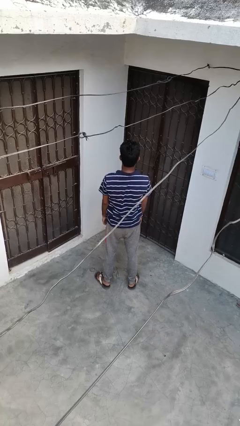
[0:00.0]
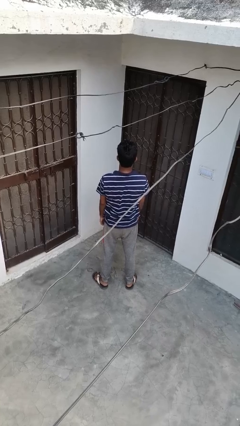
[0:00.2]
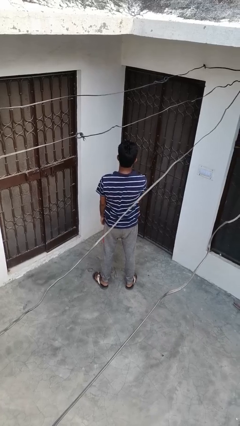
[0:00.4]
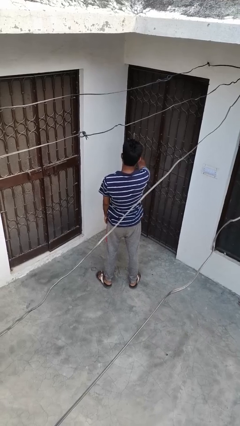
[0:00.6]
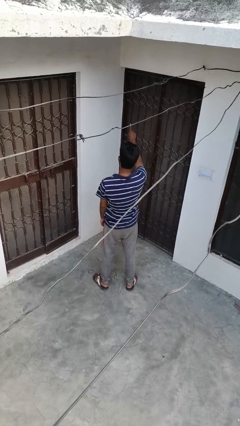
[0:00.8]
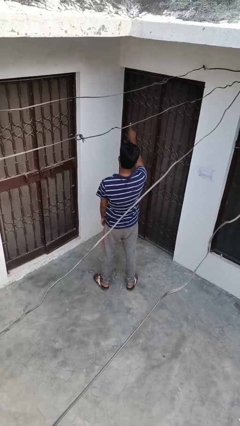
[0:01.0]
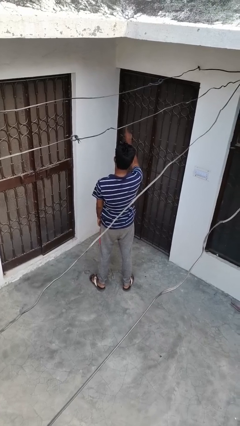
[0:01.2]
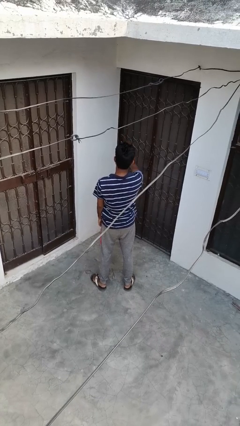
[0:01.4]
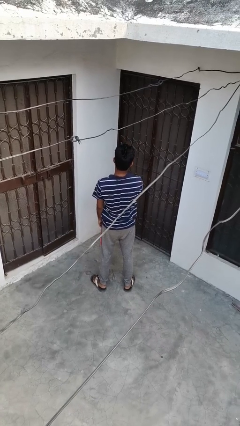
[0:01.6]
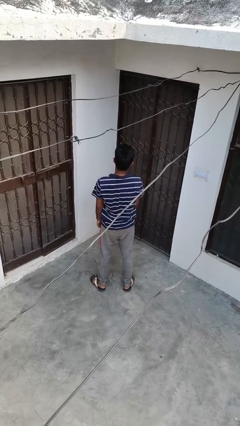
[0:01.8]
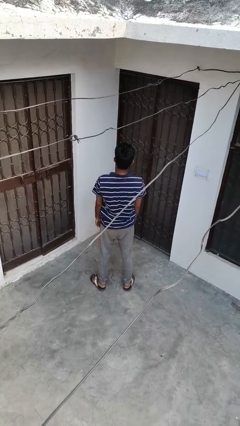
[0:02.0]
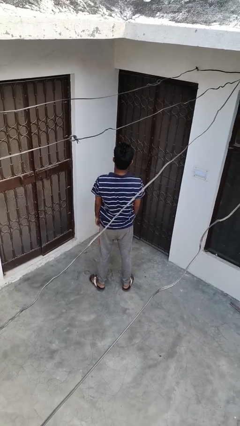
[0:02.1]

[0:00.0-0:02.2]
person gestures number one

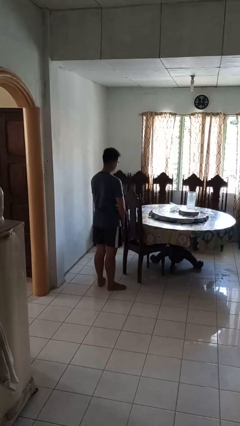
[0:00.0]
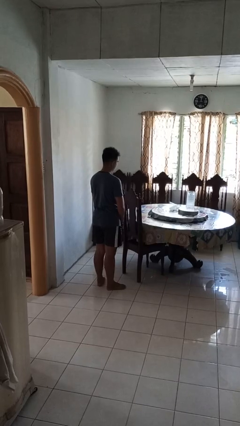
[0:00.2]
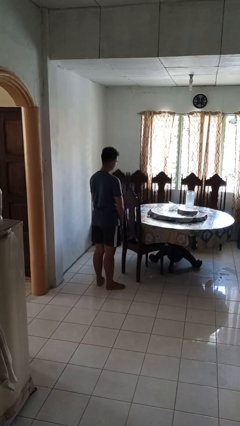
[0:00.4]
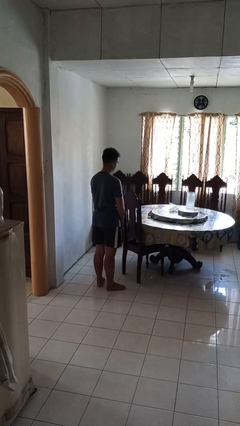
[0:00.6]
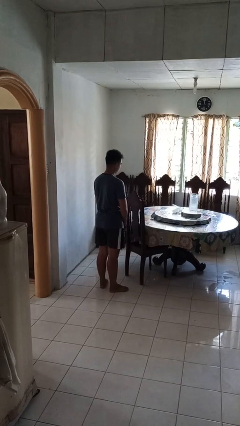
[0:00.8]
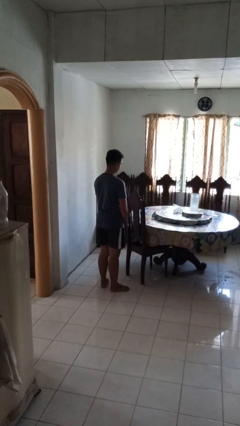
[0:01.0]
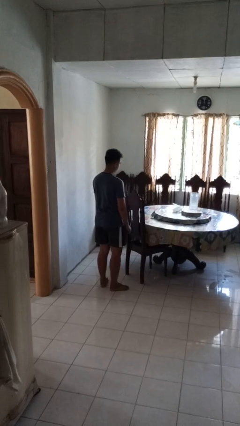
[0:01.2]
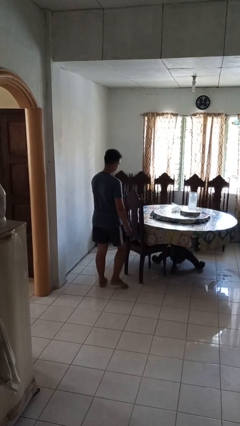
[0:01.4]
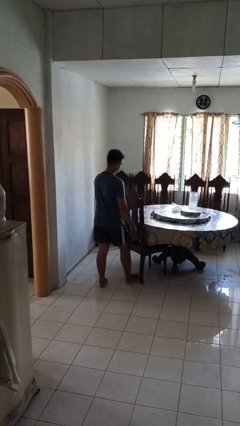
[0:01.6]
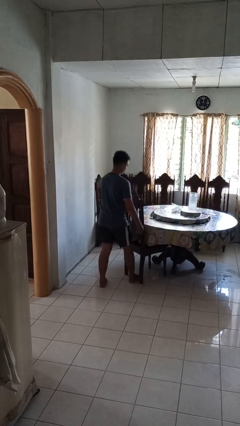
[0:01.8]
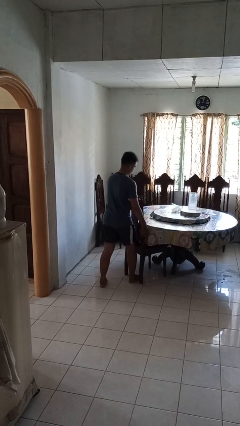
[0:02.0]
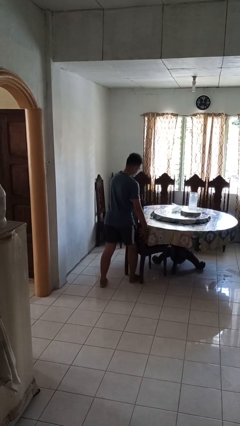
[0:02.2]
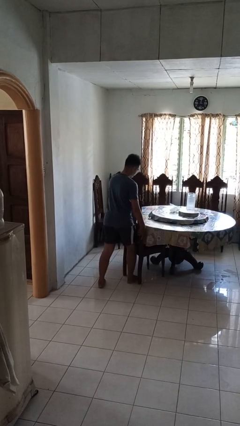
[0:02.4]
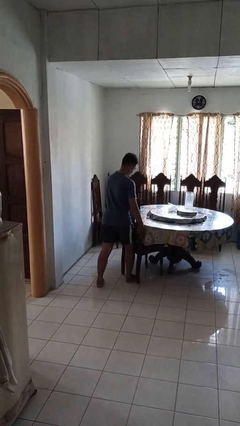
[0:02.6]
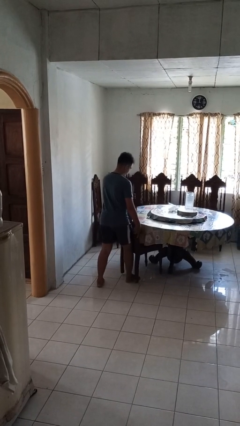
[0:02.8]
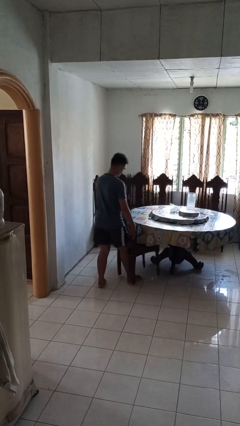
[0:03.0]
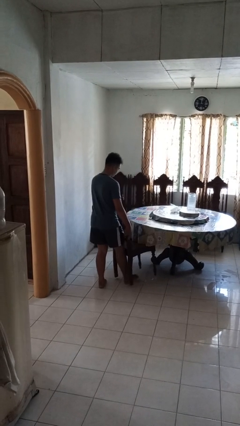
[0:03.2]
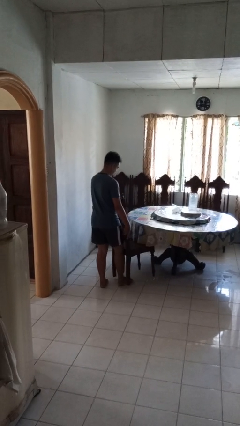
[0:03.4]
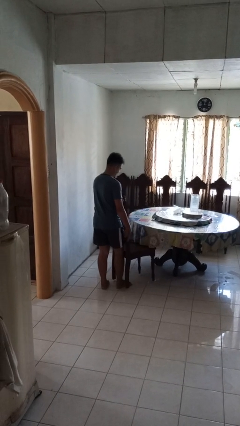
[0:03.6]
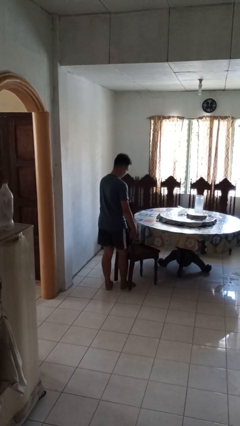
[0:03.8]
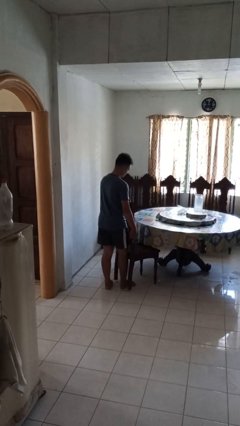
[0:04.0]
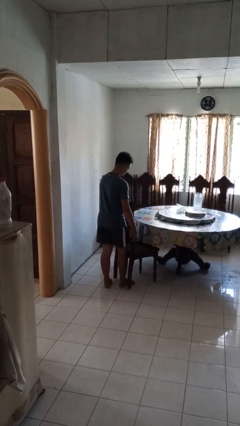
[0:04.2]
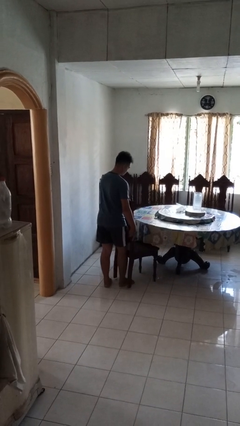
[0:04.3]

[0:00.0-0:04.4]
person pulls out chair

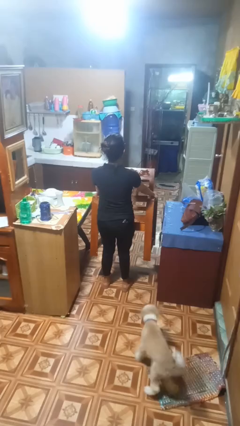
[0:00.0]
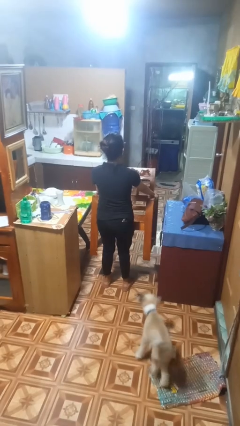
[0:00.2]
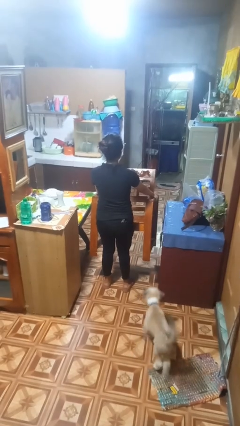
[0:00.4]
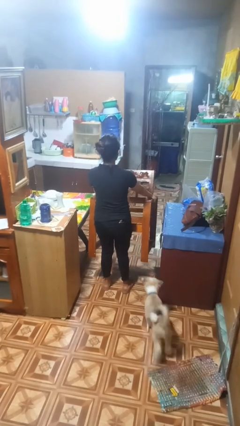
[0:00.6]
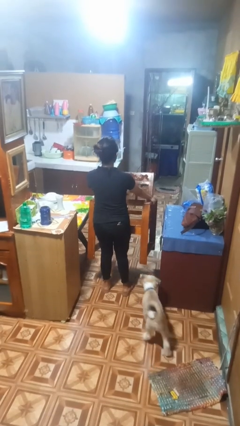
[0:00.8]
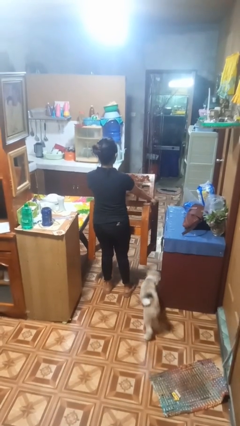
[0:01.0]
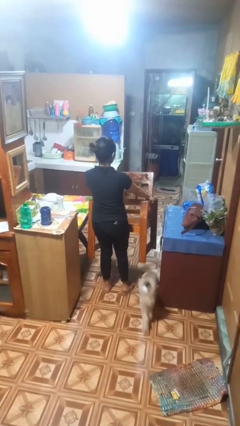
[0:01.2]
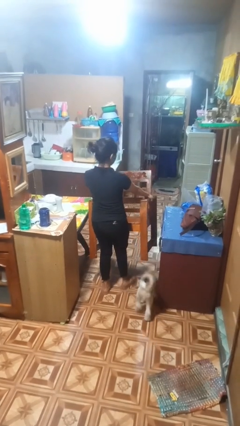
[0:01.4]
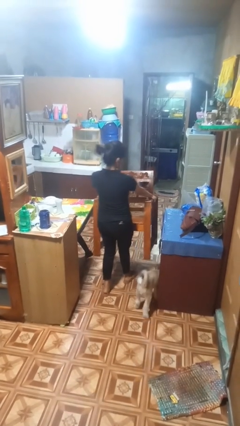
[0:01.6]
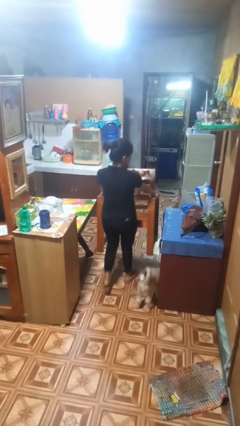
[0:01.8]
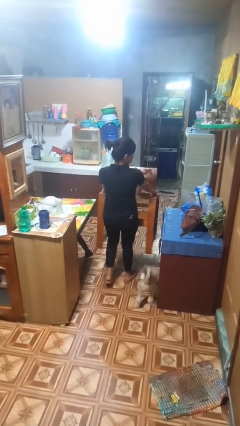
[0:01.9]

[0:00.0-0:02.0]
person carries furniture

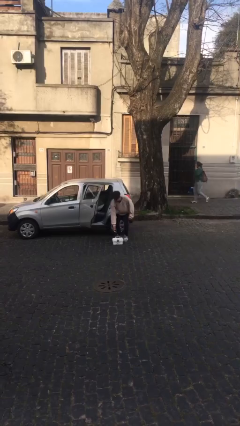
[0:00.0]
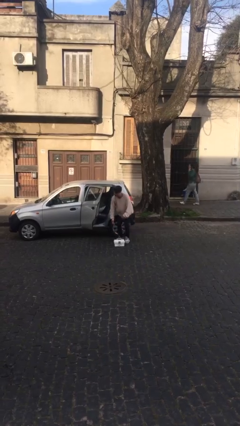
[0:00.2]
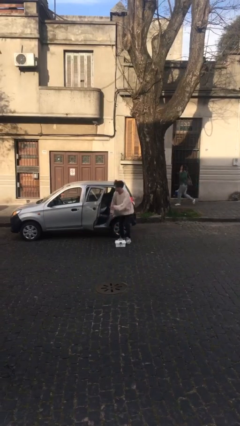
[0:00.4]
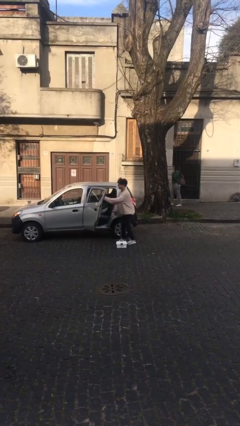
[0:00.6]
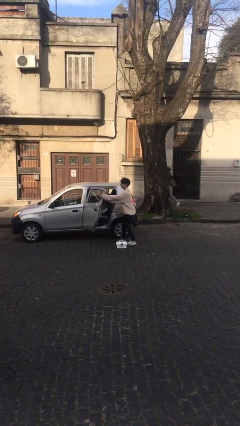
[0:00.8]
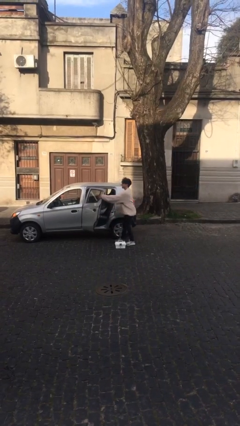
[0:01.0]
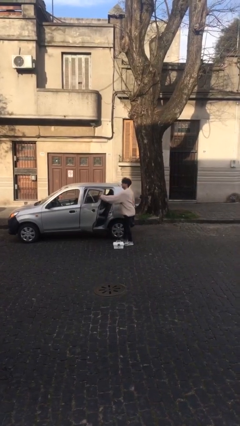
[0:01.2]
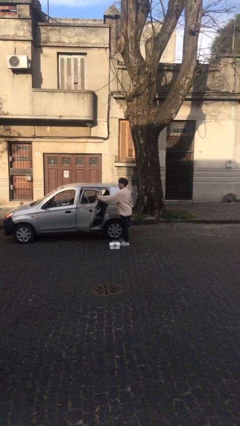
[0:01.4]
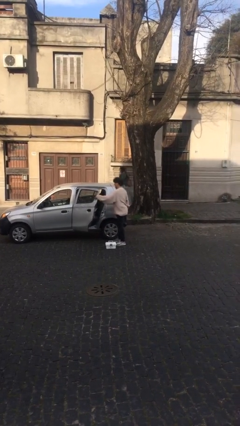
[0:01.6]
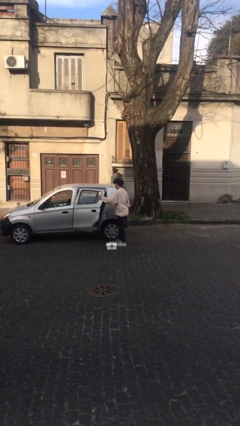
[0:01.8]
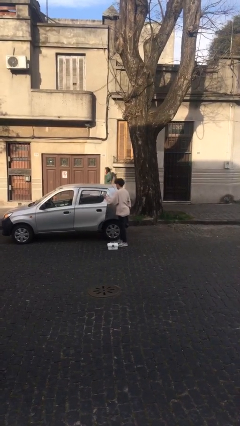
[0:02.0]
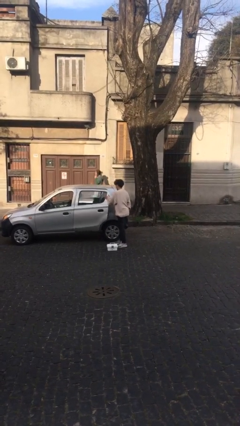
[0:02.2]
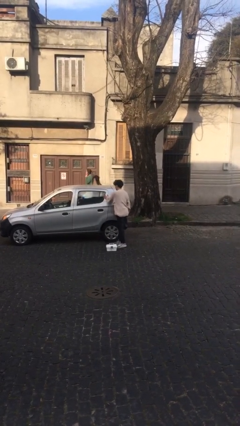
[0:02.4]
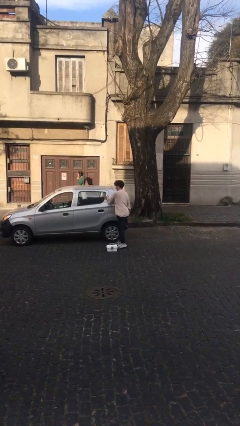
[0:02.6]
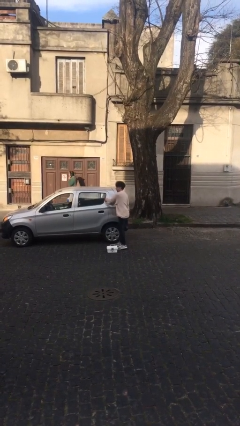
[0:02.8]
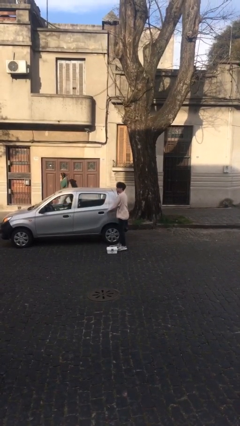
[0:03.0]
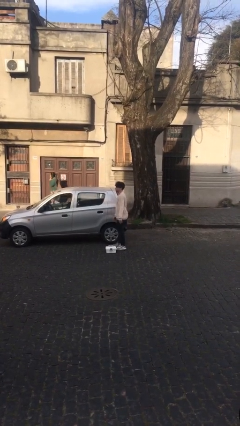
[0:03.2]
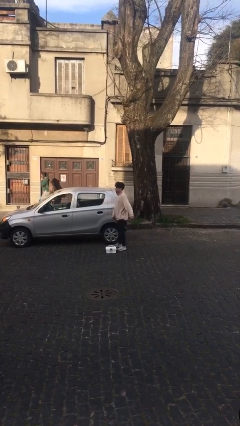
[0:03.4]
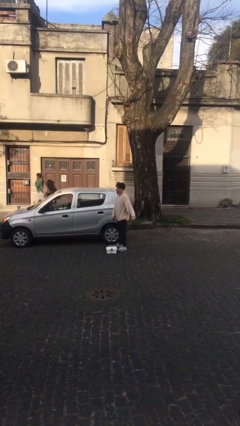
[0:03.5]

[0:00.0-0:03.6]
person closes car door

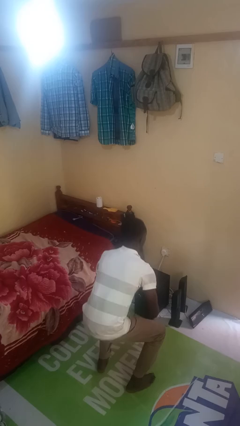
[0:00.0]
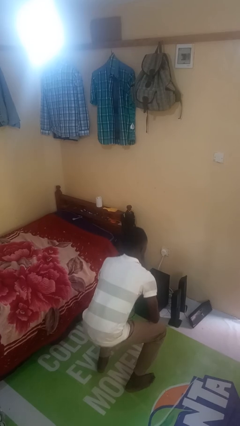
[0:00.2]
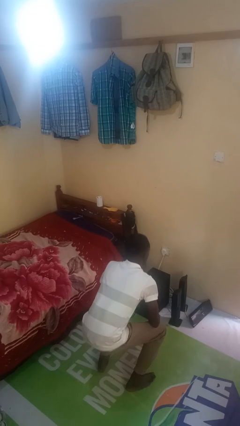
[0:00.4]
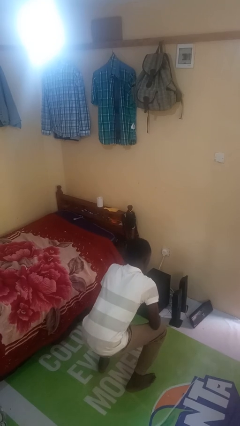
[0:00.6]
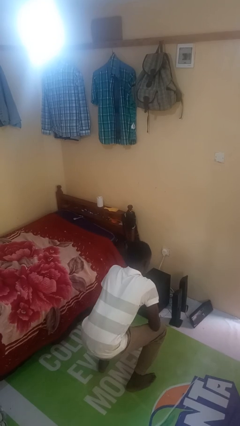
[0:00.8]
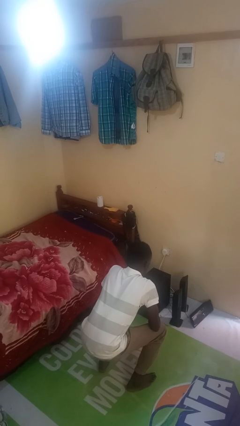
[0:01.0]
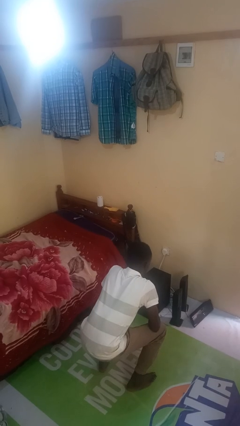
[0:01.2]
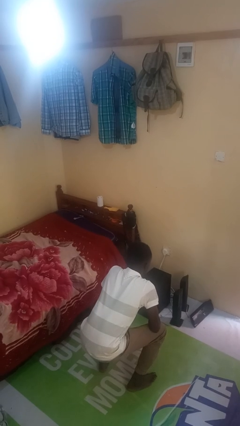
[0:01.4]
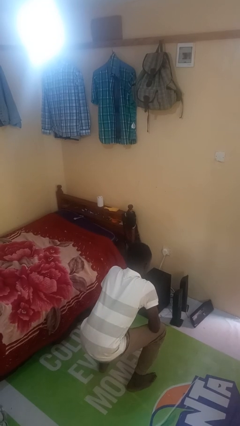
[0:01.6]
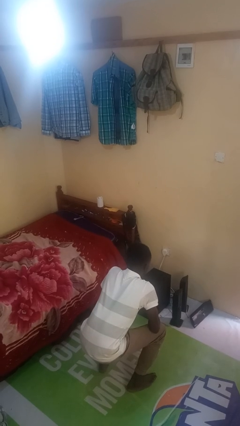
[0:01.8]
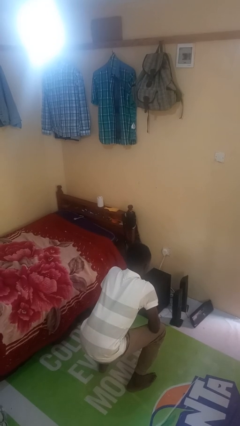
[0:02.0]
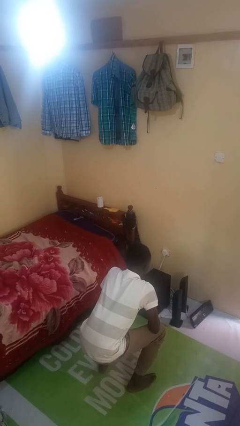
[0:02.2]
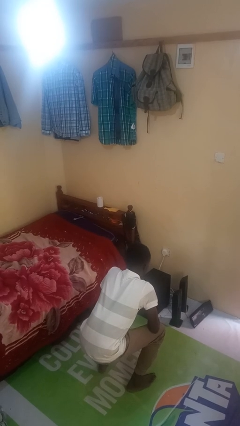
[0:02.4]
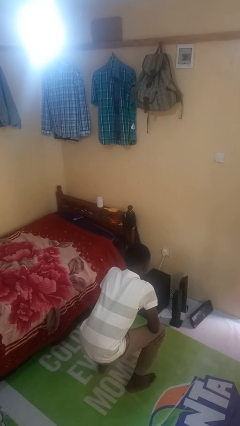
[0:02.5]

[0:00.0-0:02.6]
person squats

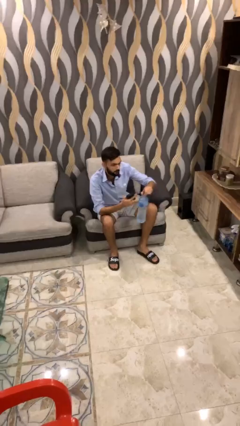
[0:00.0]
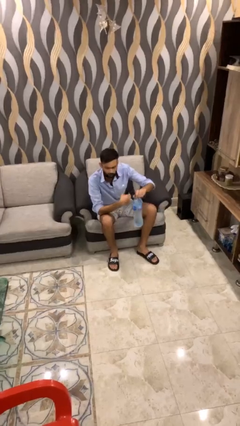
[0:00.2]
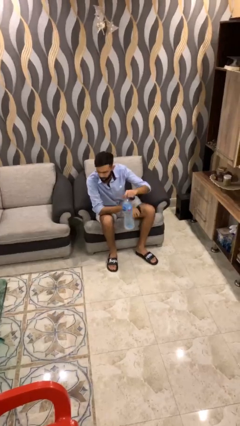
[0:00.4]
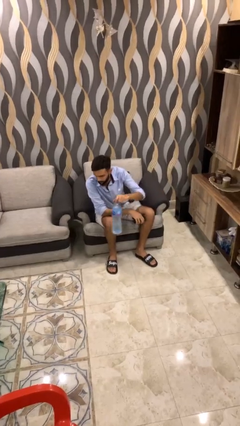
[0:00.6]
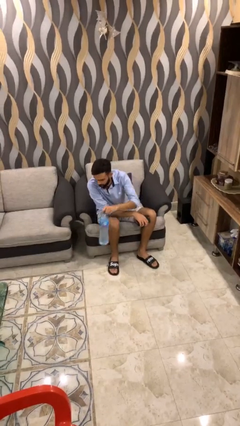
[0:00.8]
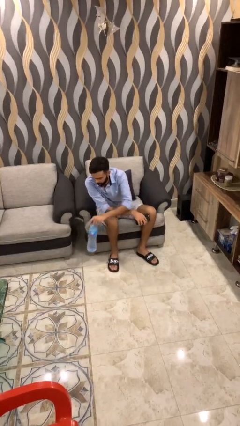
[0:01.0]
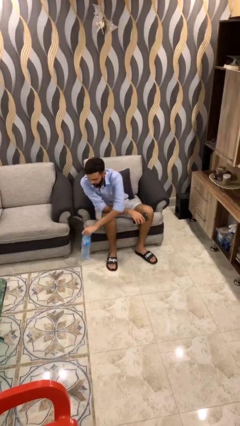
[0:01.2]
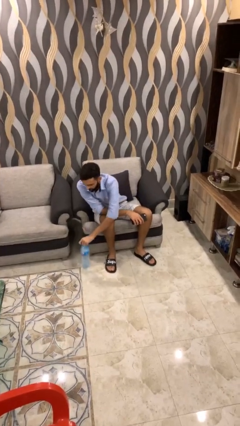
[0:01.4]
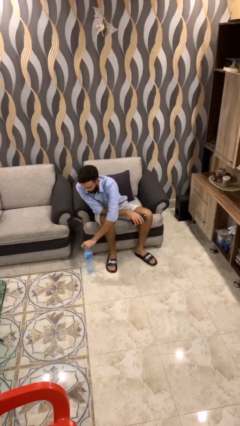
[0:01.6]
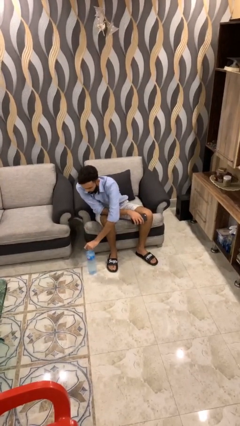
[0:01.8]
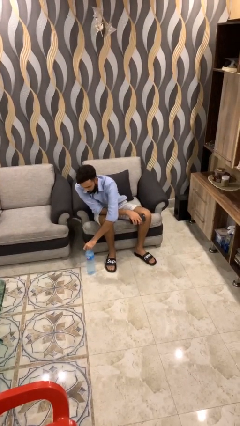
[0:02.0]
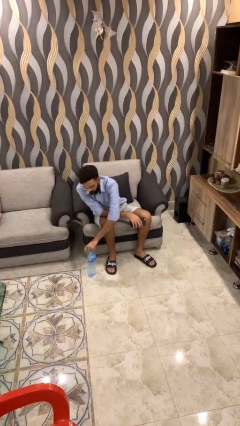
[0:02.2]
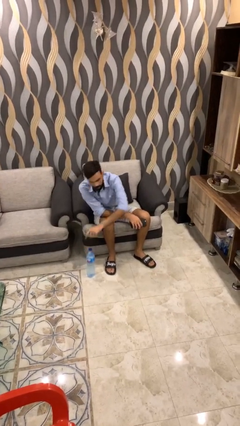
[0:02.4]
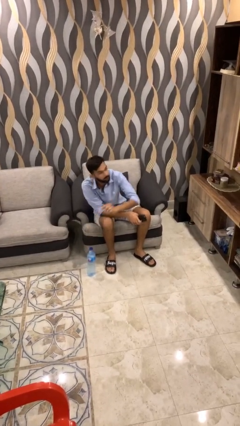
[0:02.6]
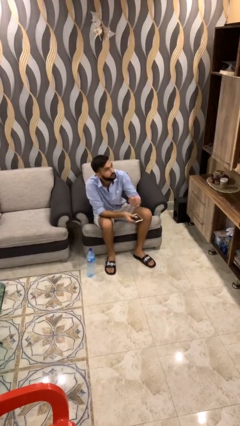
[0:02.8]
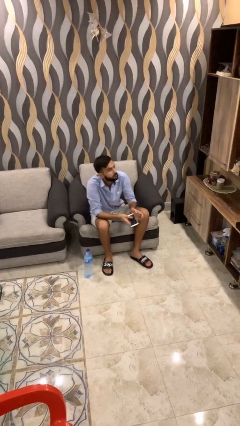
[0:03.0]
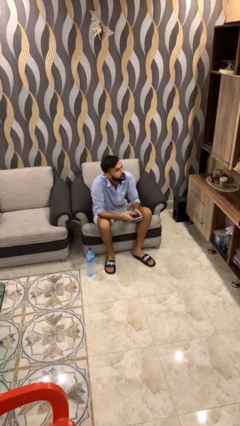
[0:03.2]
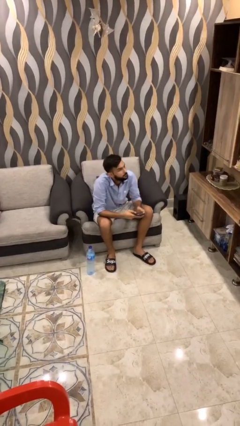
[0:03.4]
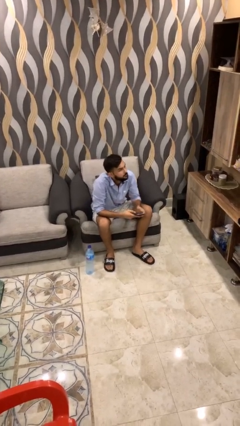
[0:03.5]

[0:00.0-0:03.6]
person puts down object on floor
